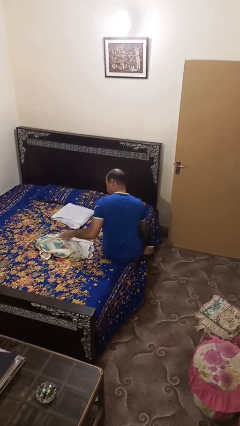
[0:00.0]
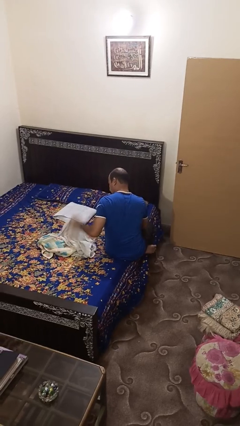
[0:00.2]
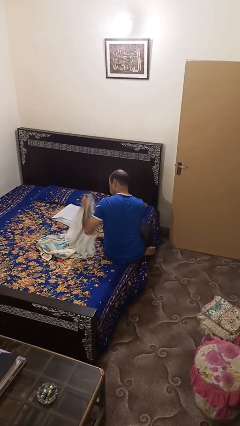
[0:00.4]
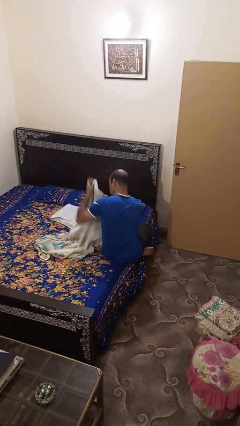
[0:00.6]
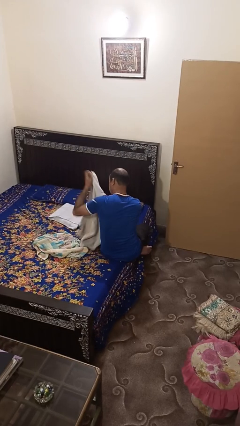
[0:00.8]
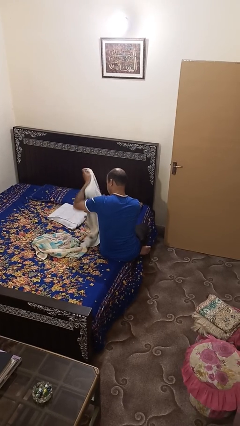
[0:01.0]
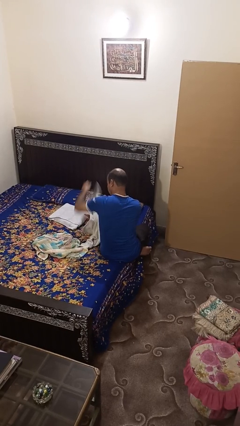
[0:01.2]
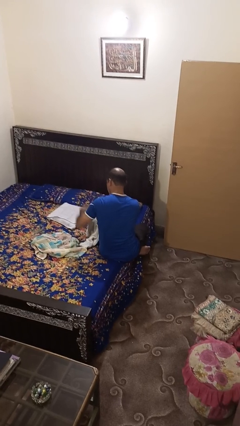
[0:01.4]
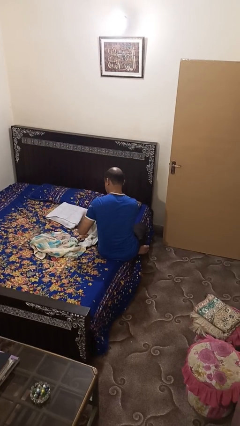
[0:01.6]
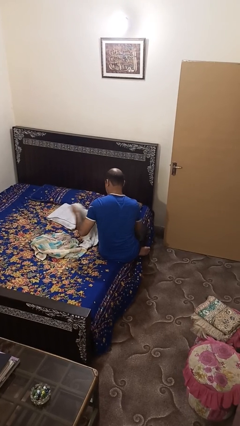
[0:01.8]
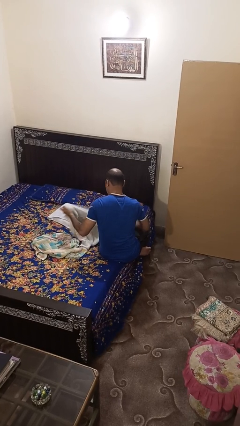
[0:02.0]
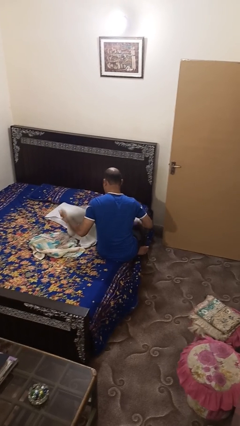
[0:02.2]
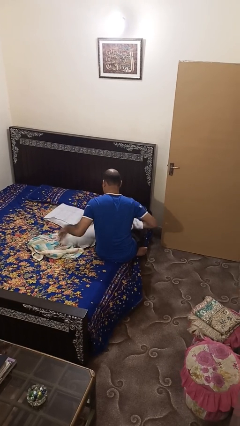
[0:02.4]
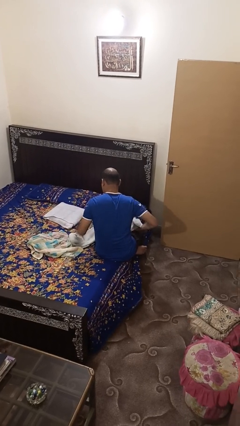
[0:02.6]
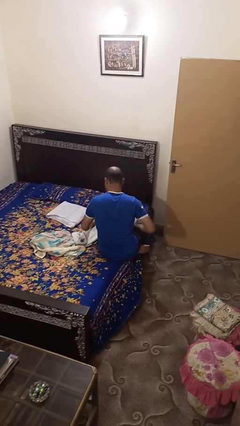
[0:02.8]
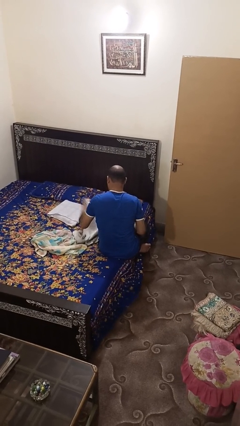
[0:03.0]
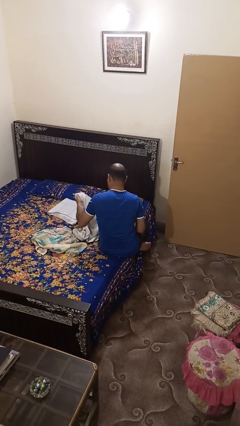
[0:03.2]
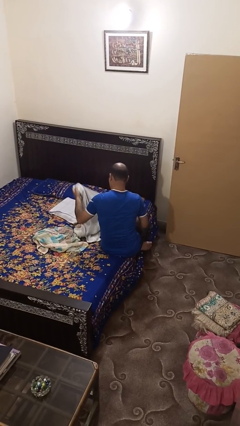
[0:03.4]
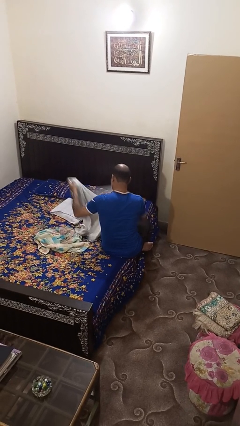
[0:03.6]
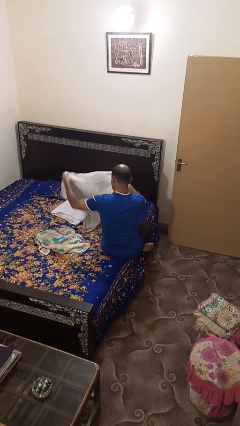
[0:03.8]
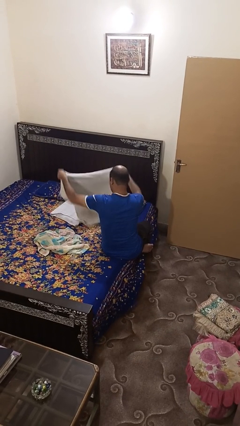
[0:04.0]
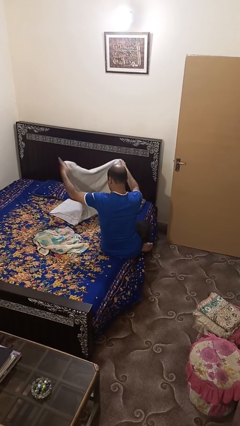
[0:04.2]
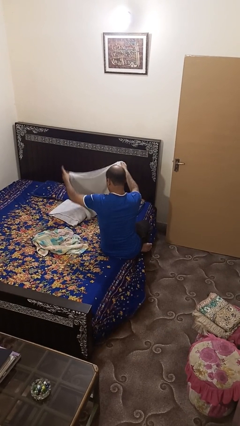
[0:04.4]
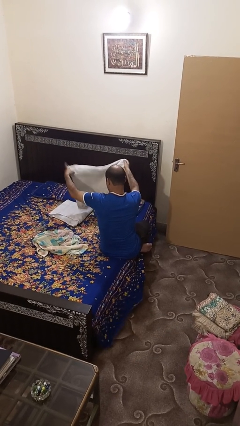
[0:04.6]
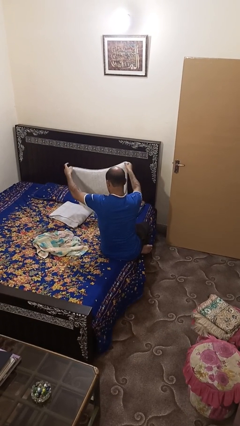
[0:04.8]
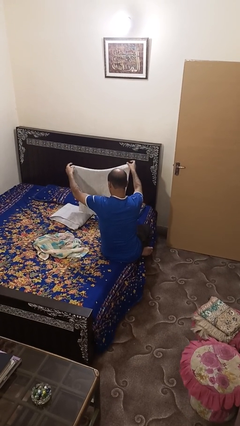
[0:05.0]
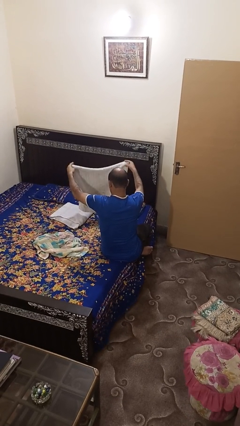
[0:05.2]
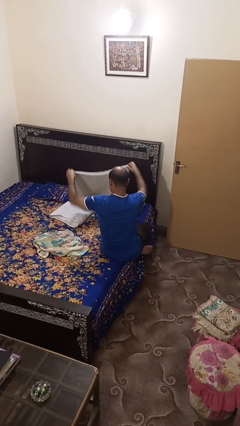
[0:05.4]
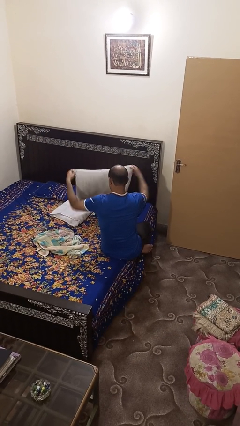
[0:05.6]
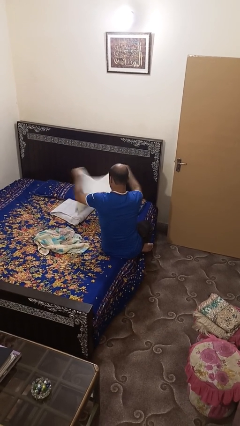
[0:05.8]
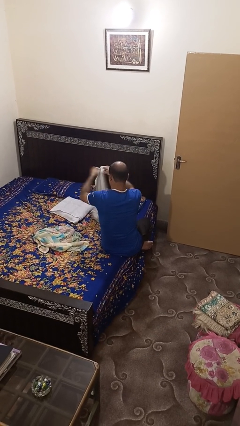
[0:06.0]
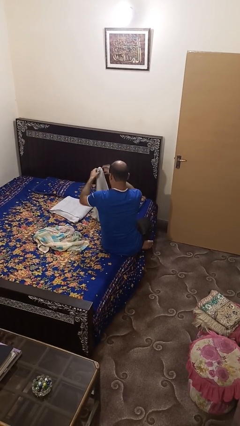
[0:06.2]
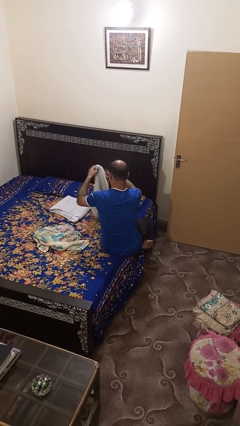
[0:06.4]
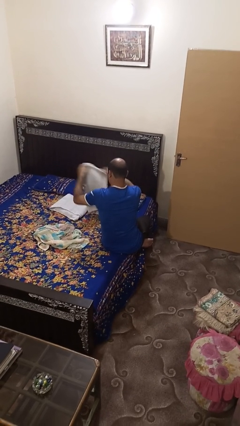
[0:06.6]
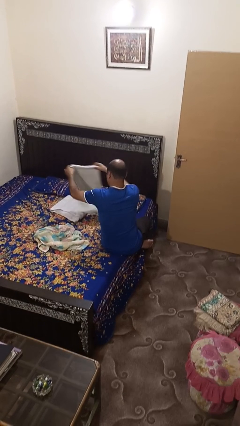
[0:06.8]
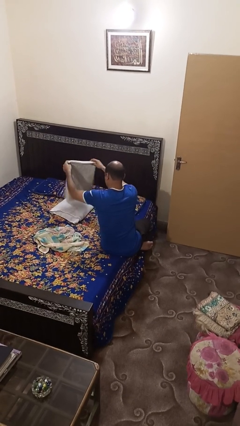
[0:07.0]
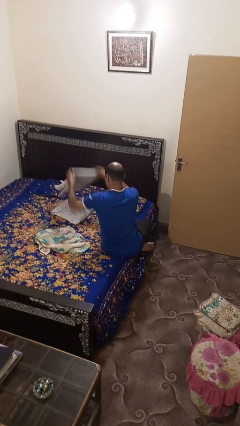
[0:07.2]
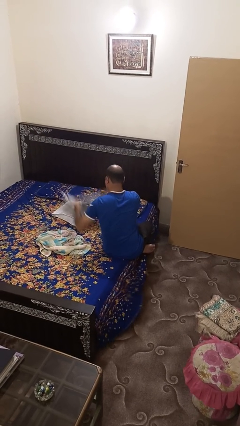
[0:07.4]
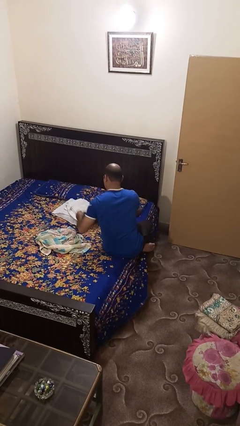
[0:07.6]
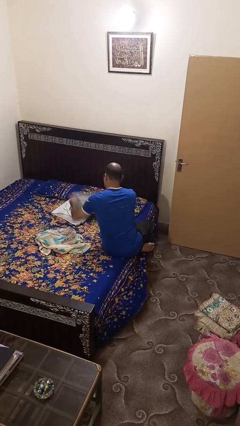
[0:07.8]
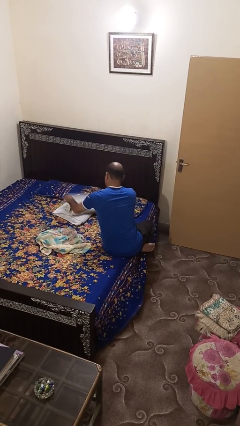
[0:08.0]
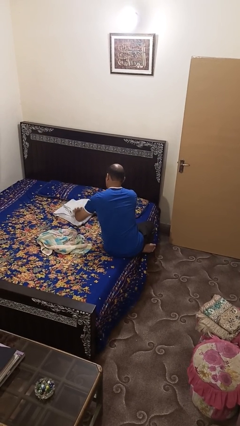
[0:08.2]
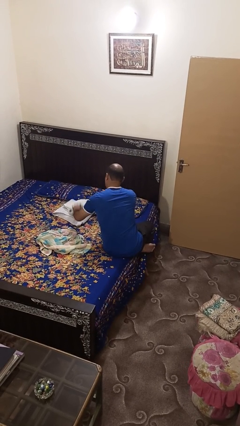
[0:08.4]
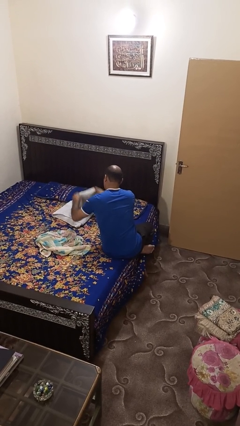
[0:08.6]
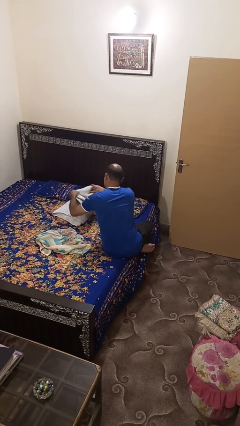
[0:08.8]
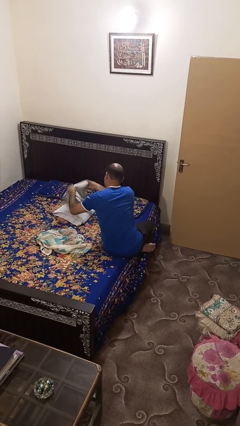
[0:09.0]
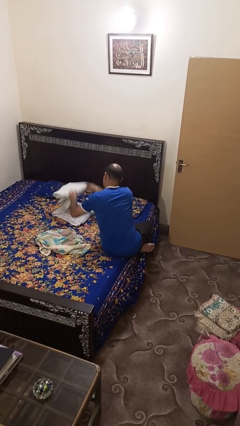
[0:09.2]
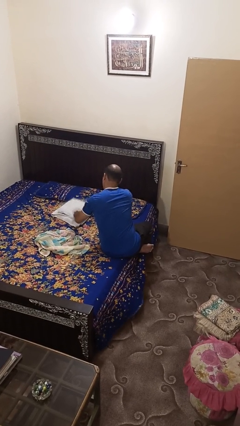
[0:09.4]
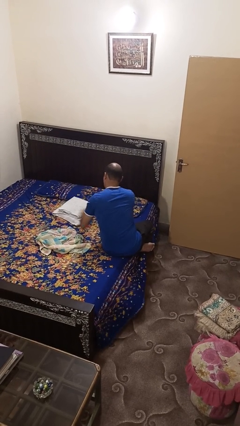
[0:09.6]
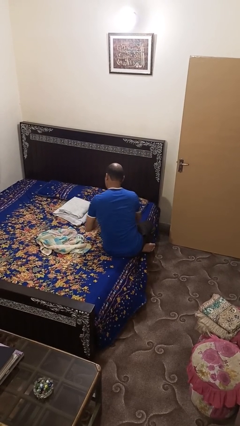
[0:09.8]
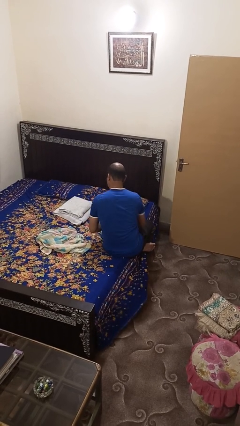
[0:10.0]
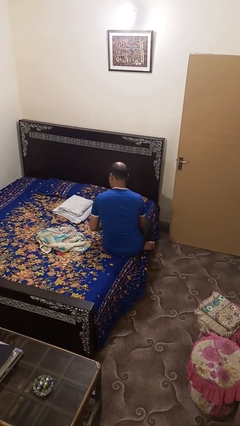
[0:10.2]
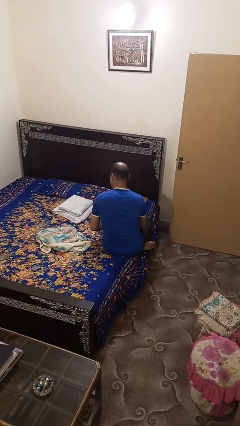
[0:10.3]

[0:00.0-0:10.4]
person folds towel

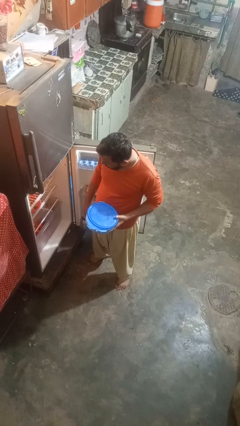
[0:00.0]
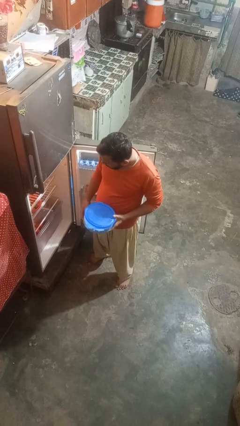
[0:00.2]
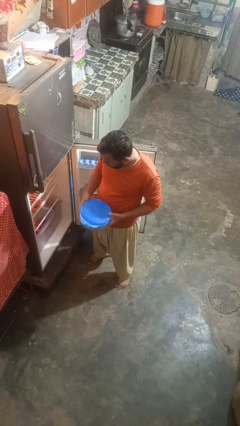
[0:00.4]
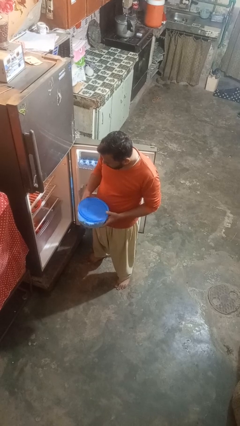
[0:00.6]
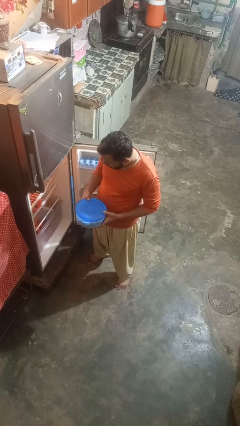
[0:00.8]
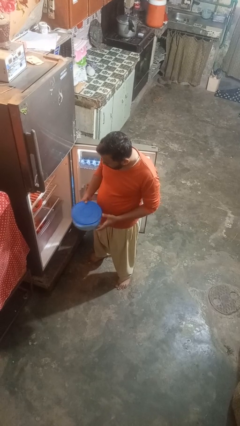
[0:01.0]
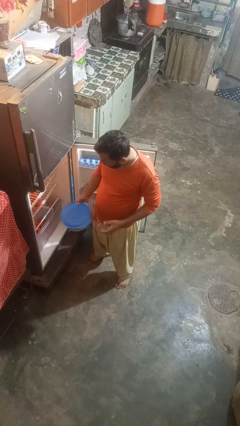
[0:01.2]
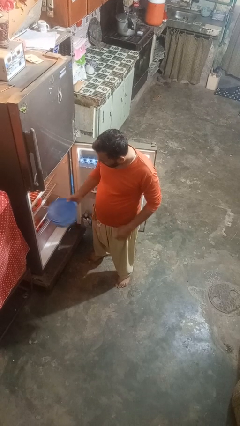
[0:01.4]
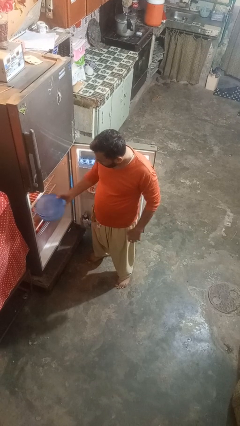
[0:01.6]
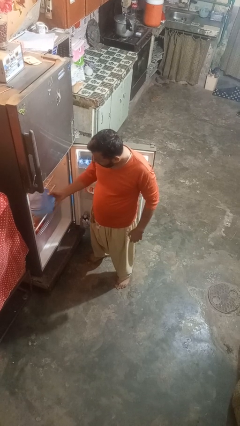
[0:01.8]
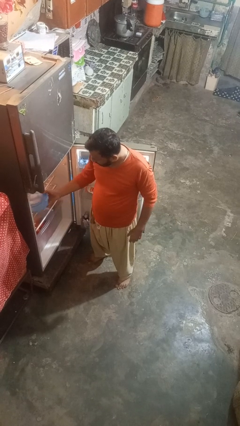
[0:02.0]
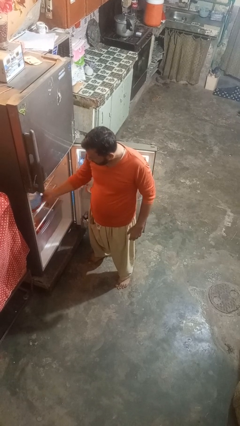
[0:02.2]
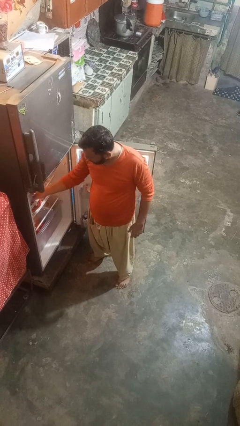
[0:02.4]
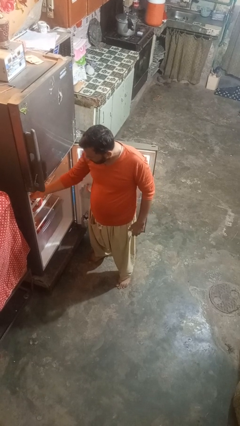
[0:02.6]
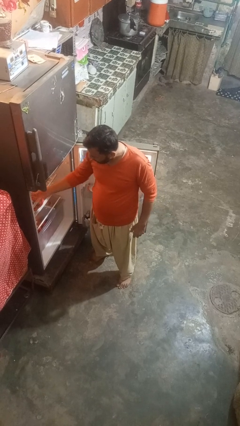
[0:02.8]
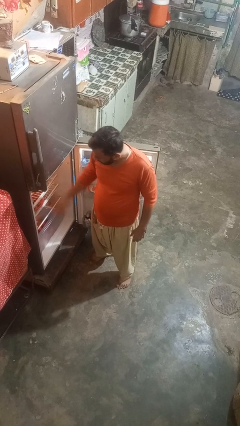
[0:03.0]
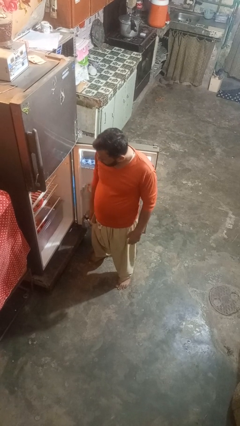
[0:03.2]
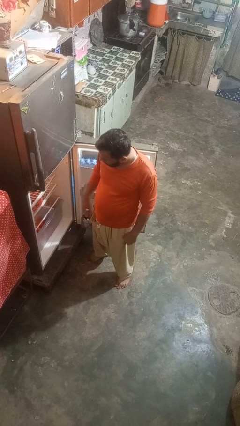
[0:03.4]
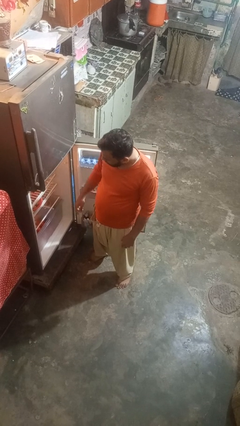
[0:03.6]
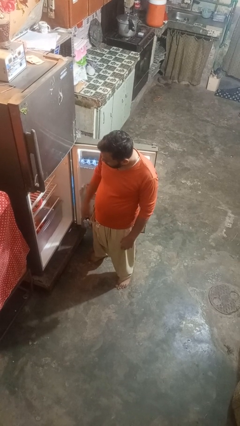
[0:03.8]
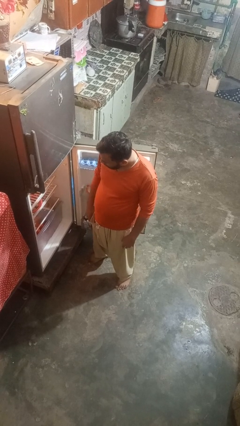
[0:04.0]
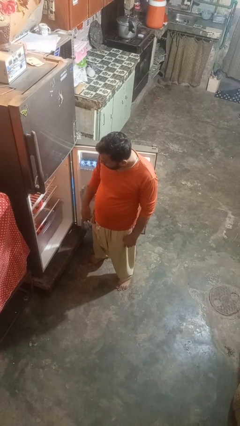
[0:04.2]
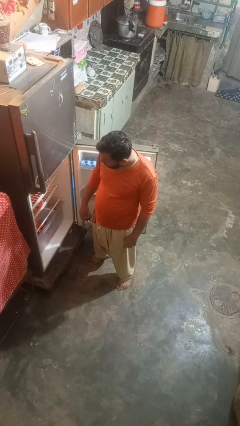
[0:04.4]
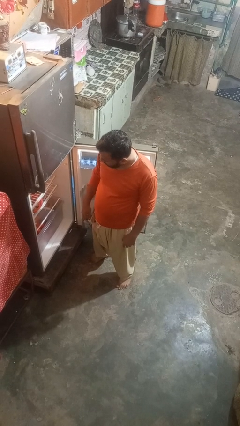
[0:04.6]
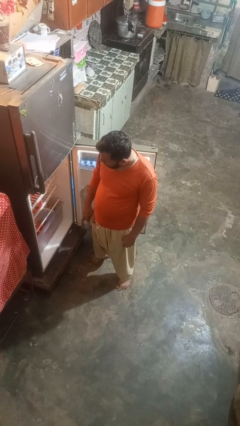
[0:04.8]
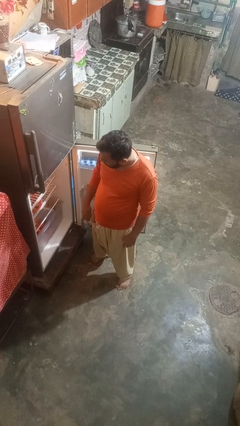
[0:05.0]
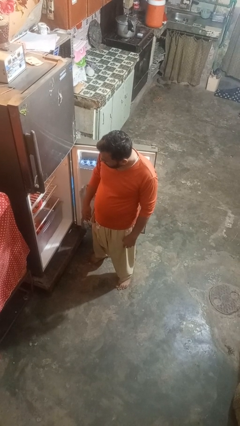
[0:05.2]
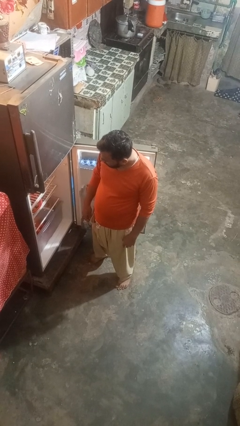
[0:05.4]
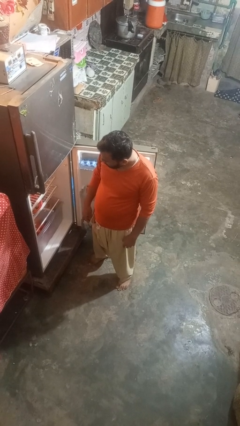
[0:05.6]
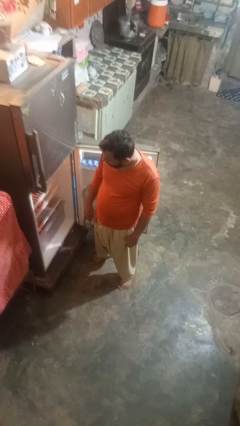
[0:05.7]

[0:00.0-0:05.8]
person puts object into refrigerator

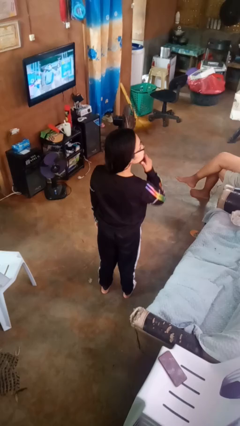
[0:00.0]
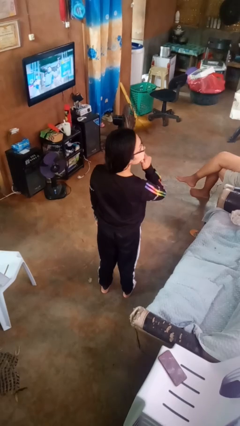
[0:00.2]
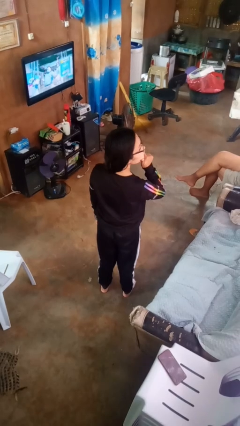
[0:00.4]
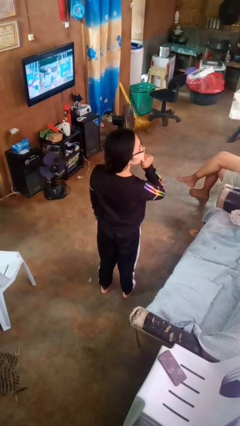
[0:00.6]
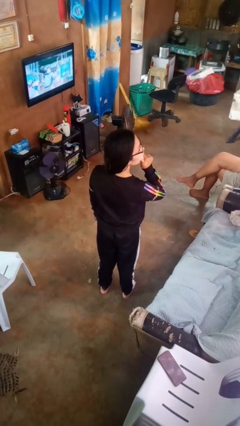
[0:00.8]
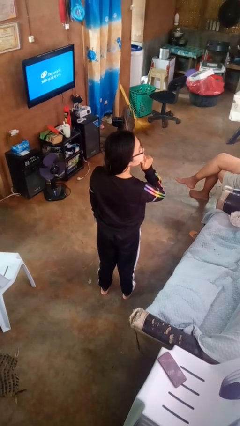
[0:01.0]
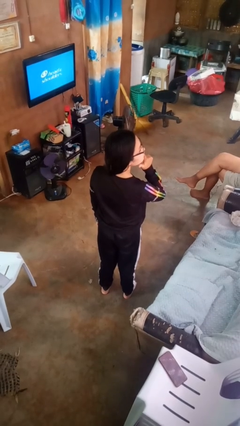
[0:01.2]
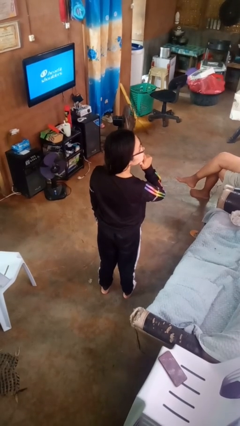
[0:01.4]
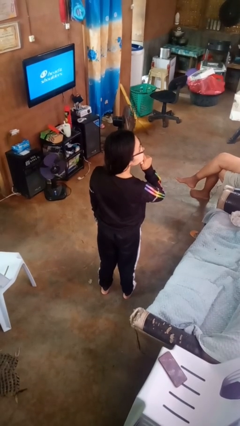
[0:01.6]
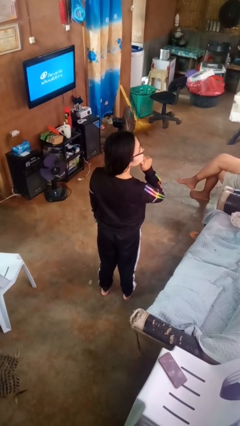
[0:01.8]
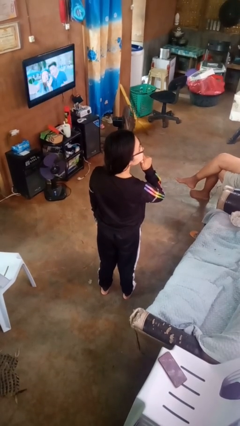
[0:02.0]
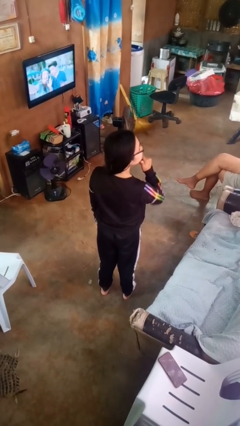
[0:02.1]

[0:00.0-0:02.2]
person strokes chin
